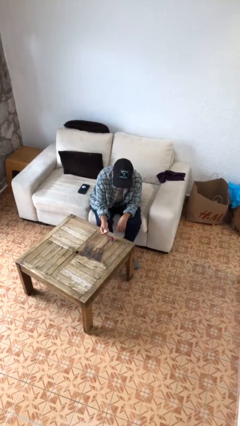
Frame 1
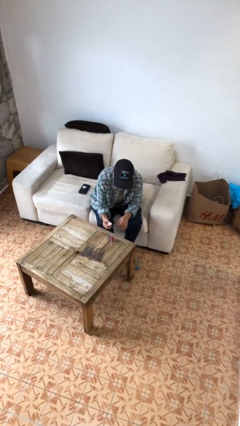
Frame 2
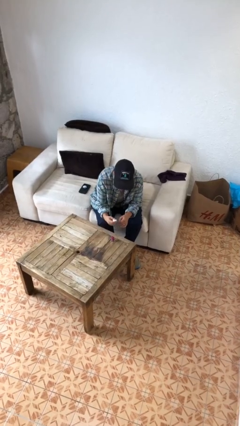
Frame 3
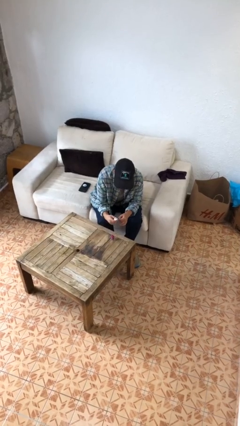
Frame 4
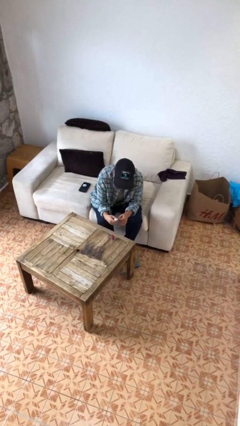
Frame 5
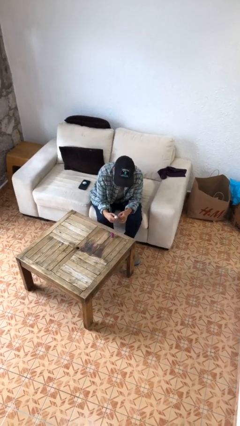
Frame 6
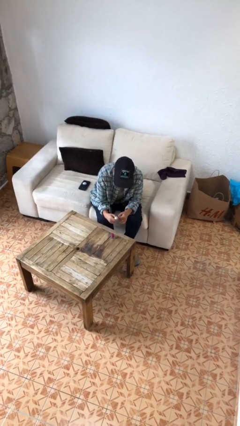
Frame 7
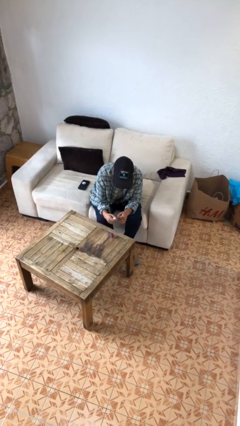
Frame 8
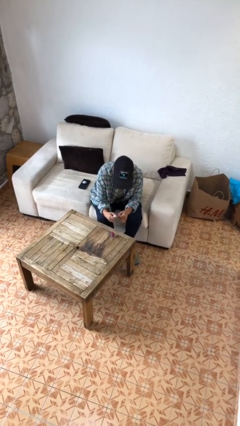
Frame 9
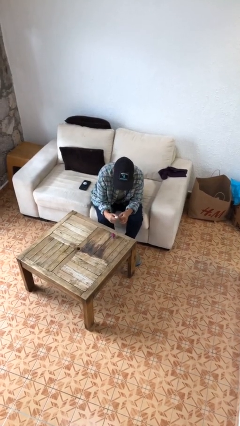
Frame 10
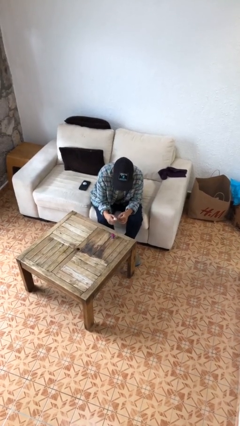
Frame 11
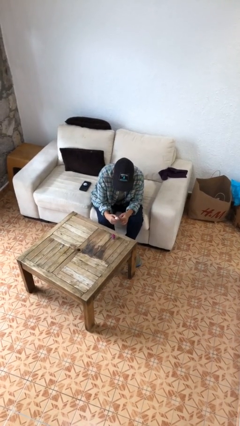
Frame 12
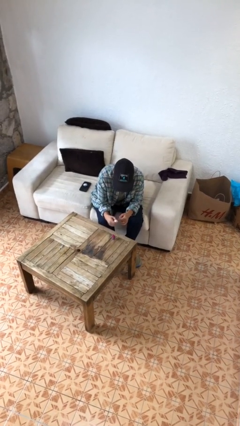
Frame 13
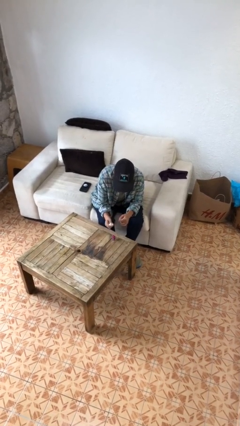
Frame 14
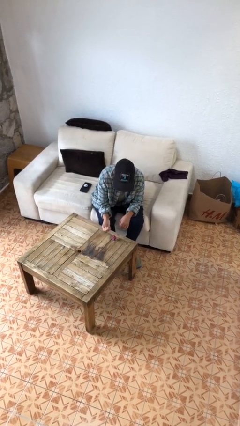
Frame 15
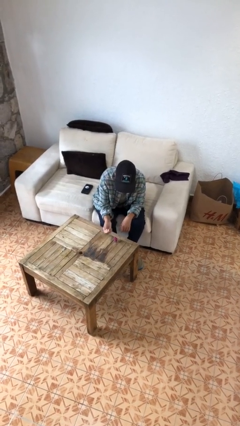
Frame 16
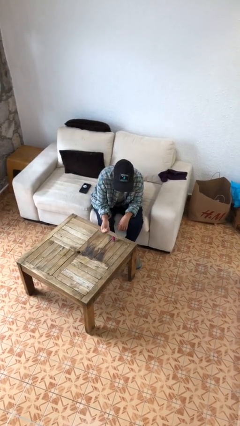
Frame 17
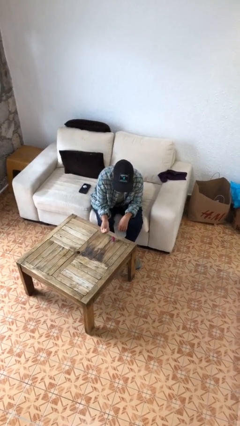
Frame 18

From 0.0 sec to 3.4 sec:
person paints fingernails

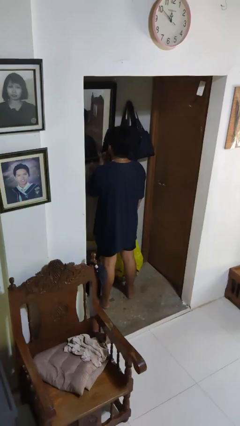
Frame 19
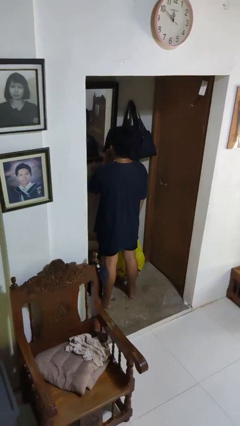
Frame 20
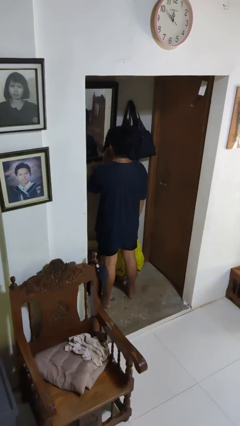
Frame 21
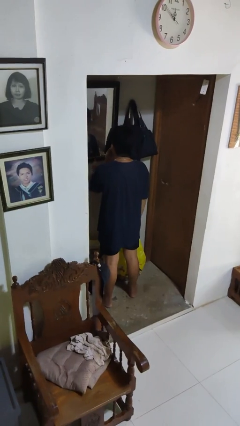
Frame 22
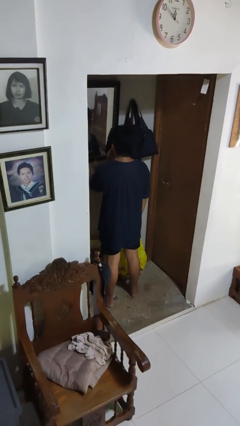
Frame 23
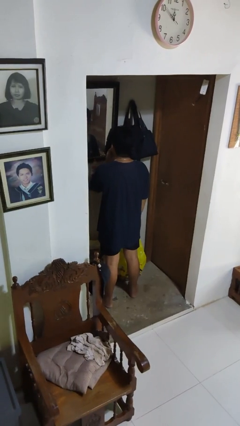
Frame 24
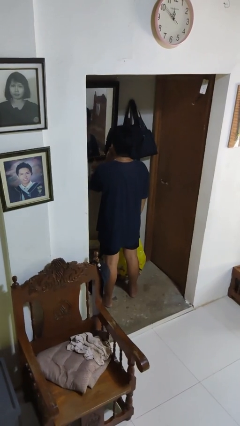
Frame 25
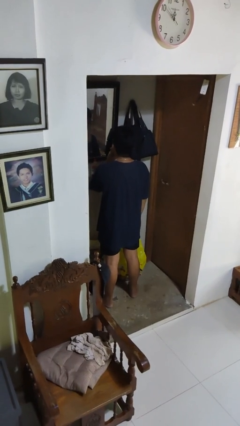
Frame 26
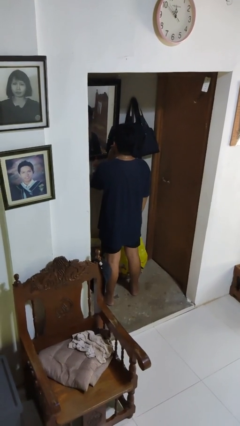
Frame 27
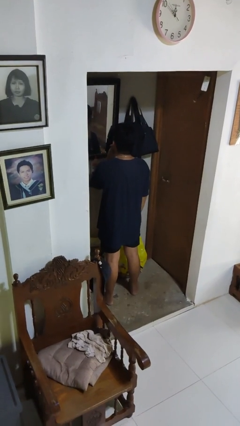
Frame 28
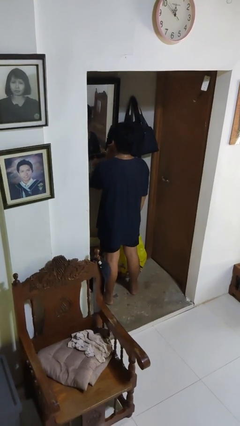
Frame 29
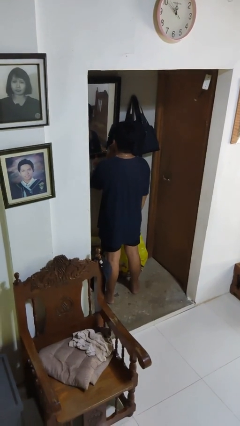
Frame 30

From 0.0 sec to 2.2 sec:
person applies lip makeup

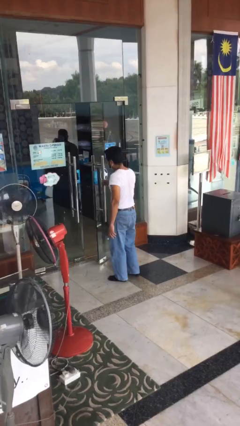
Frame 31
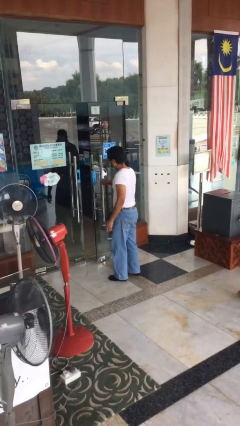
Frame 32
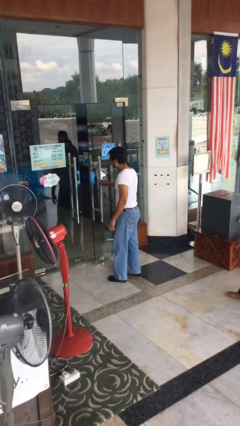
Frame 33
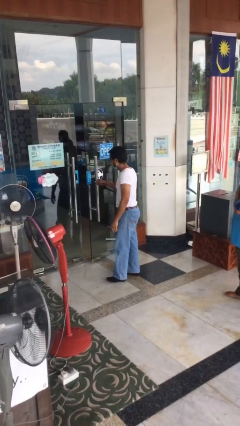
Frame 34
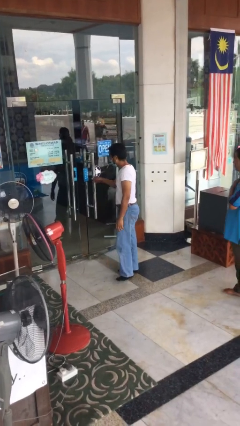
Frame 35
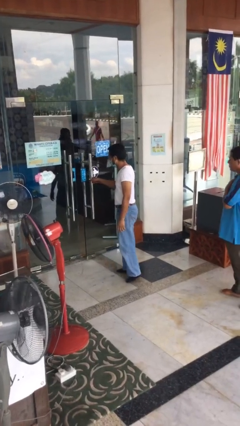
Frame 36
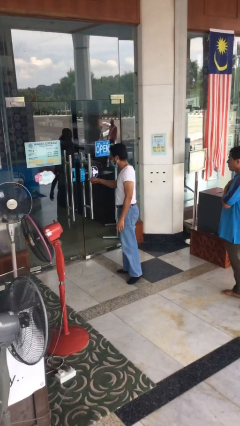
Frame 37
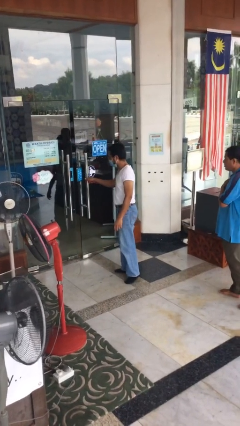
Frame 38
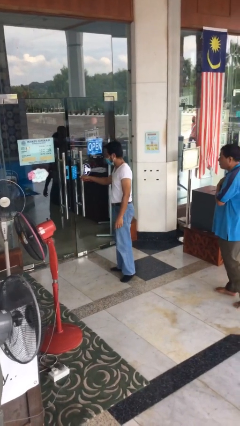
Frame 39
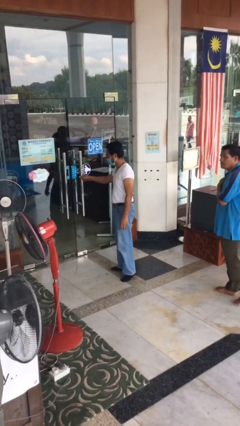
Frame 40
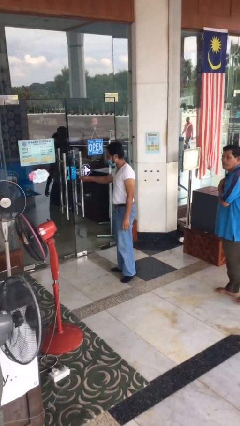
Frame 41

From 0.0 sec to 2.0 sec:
person closes facility door

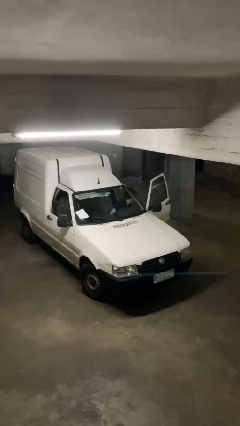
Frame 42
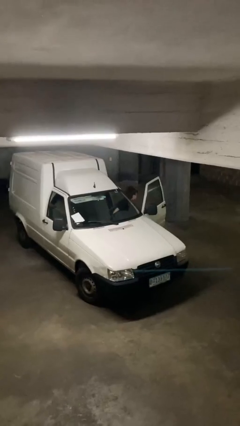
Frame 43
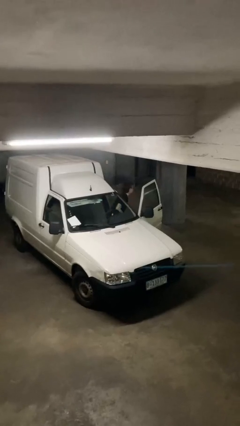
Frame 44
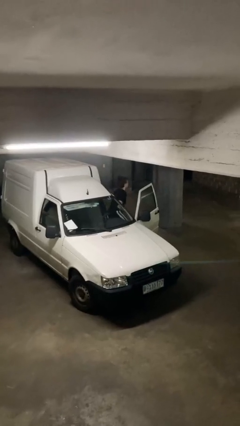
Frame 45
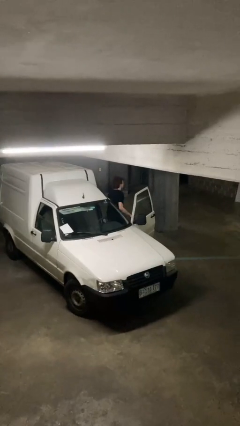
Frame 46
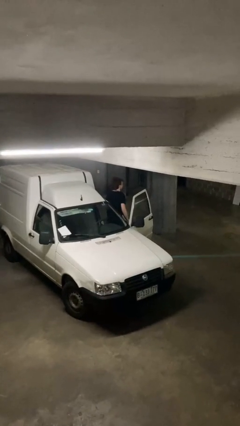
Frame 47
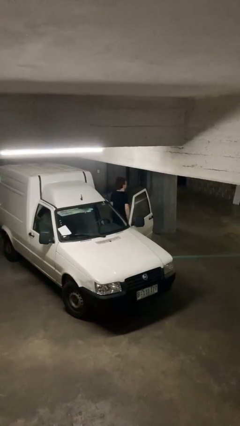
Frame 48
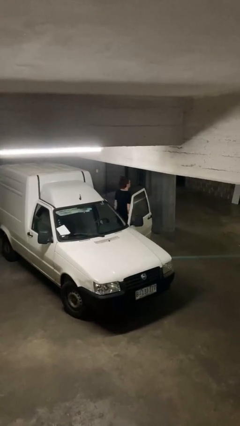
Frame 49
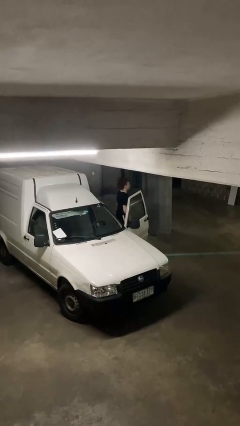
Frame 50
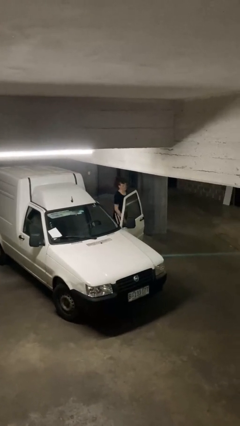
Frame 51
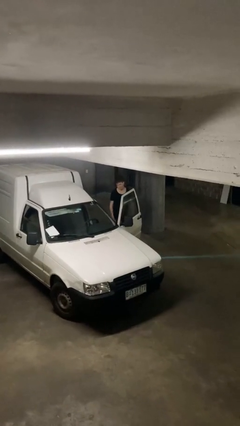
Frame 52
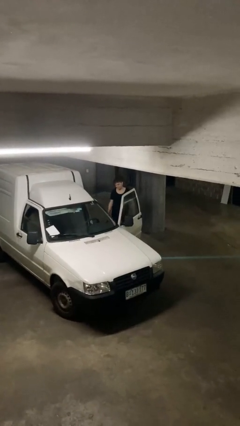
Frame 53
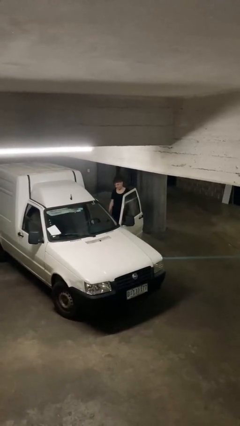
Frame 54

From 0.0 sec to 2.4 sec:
person exits car

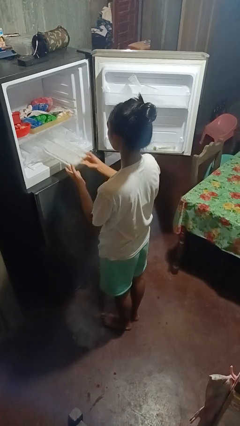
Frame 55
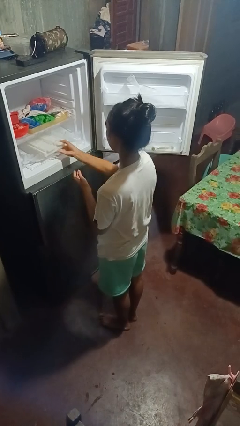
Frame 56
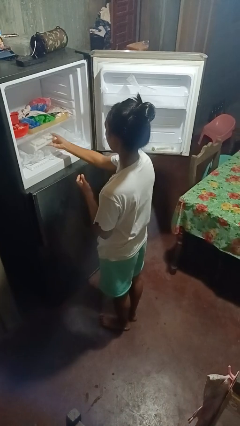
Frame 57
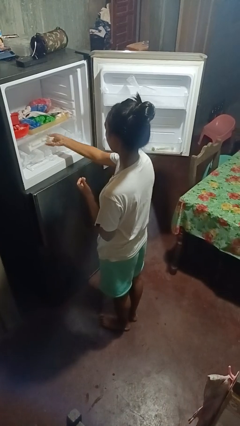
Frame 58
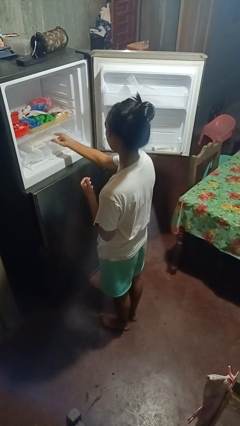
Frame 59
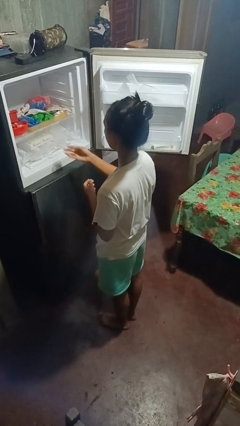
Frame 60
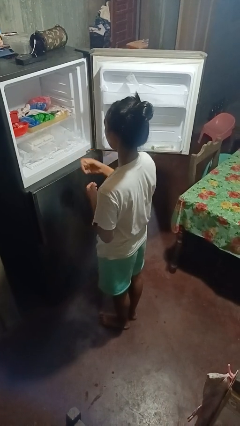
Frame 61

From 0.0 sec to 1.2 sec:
person puts object into refrigerator

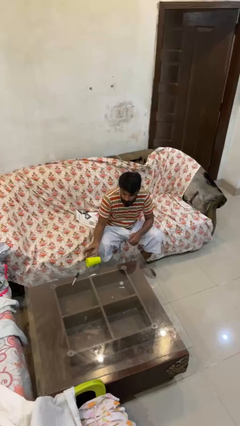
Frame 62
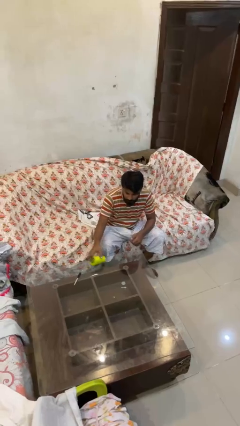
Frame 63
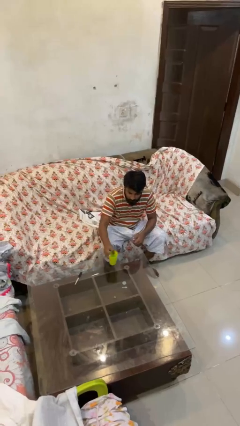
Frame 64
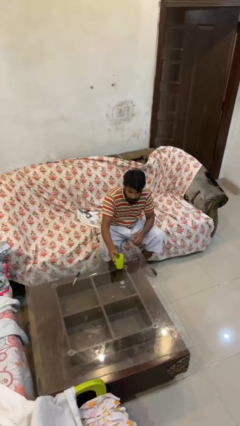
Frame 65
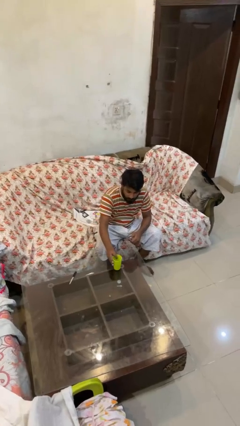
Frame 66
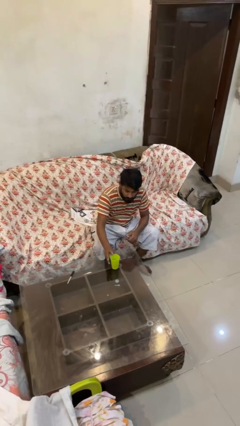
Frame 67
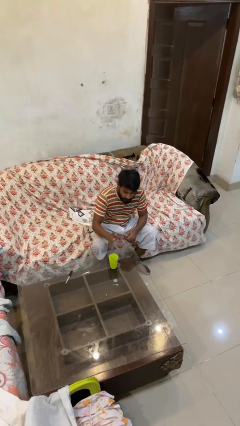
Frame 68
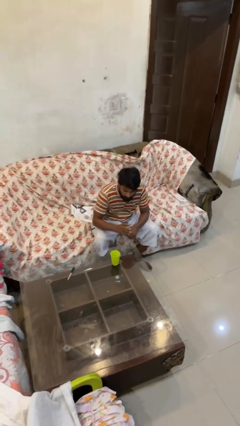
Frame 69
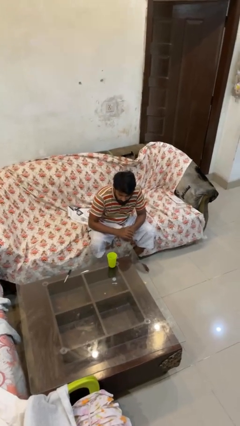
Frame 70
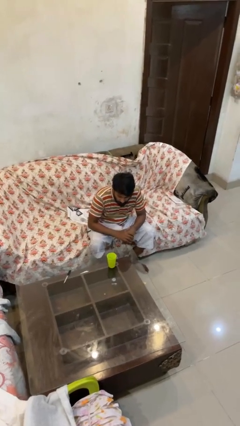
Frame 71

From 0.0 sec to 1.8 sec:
person sets upright glass

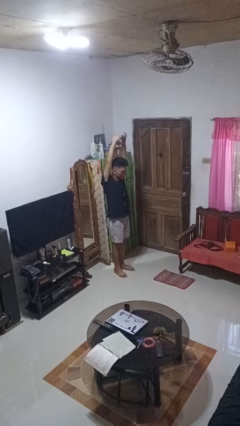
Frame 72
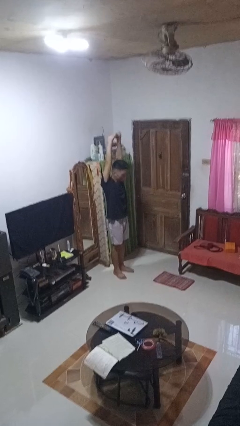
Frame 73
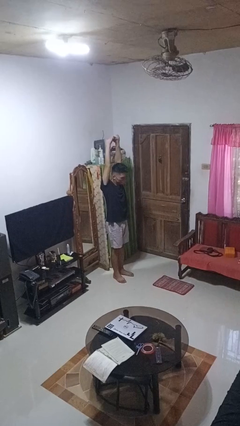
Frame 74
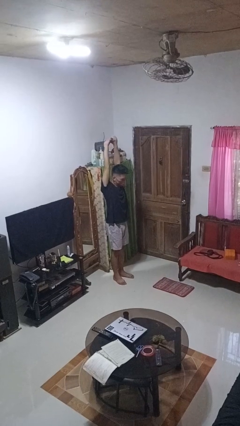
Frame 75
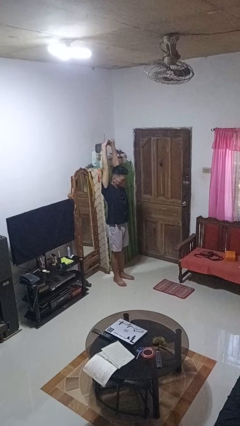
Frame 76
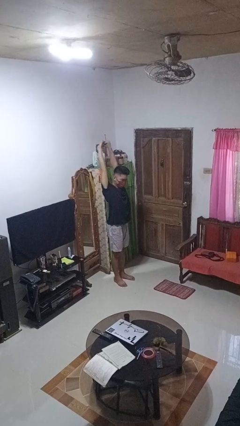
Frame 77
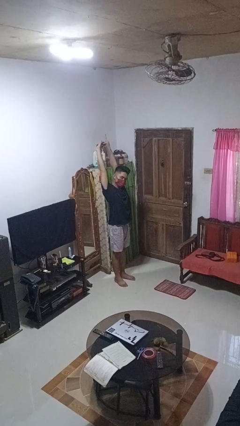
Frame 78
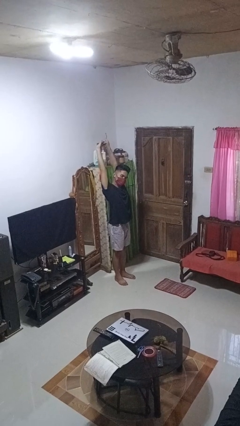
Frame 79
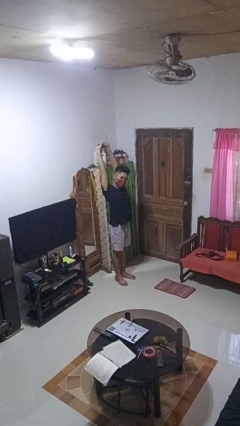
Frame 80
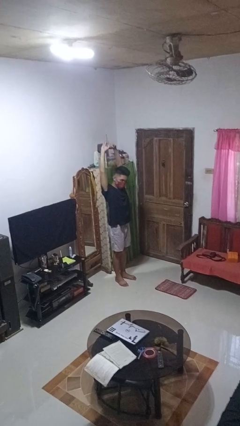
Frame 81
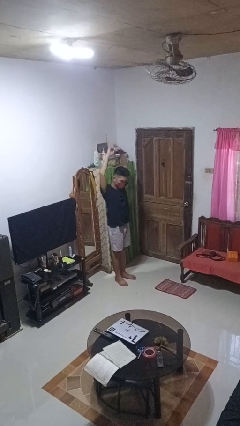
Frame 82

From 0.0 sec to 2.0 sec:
person stretches arms over head

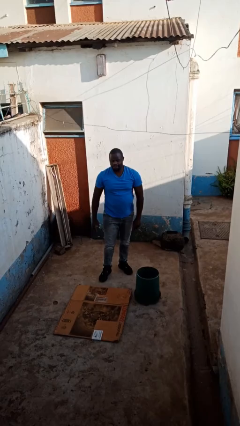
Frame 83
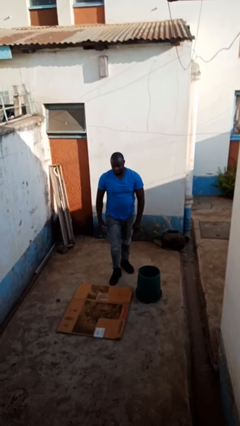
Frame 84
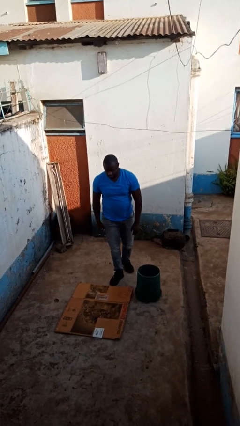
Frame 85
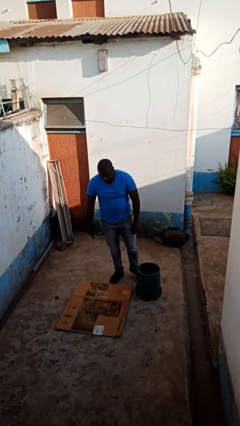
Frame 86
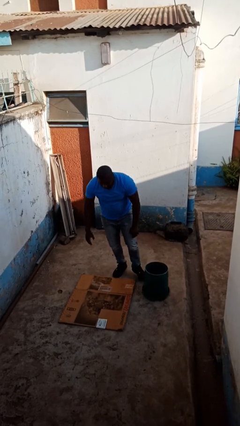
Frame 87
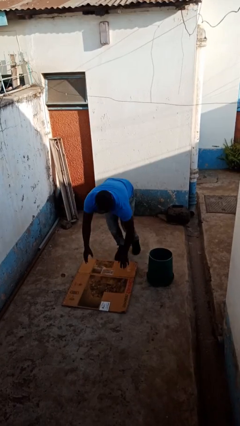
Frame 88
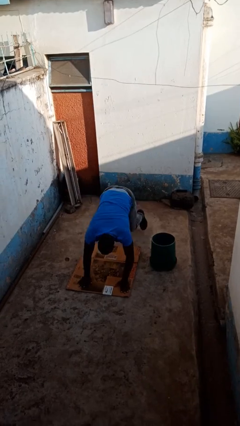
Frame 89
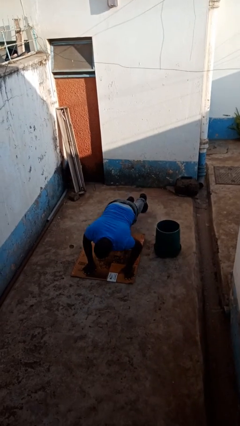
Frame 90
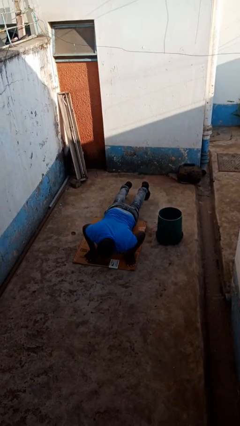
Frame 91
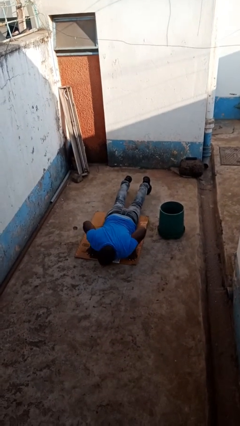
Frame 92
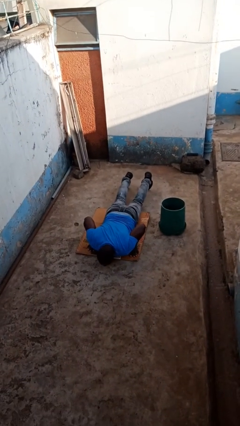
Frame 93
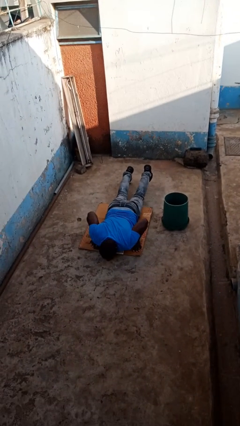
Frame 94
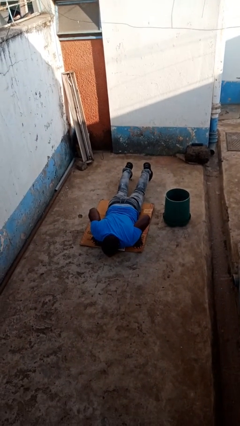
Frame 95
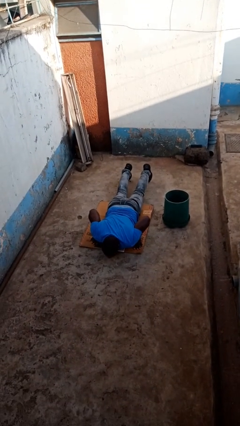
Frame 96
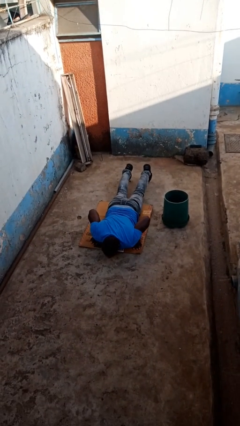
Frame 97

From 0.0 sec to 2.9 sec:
person trips on object on floor
